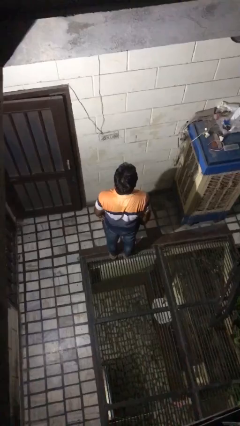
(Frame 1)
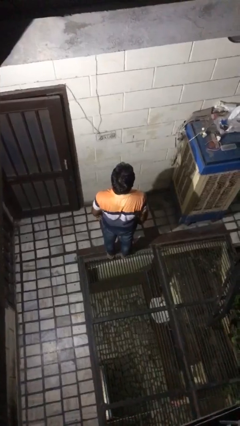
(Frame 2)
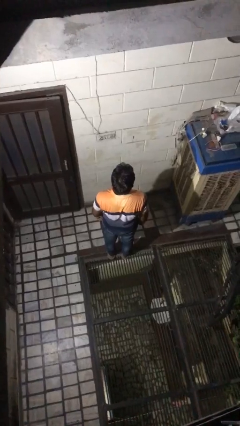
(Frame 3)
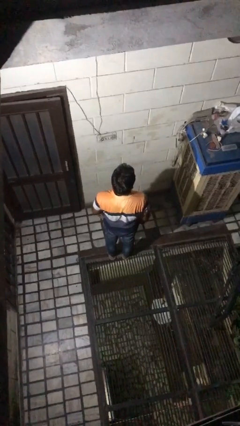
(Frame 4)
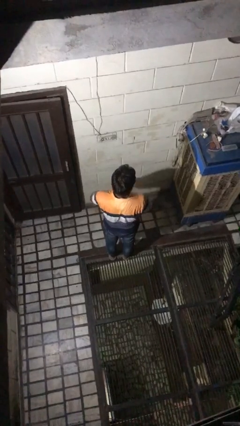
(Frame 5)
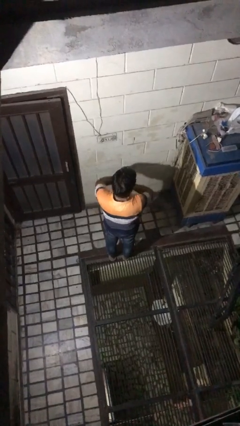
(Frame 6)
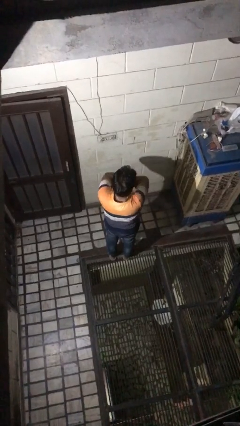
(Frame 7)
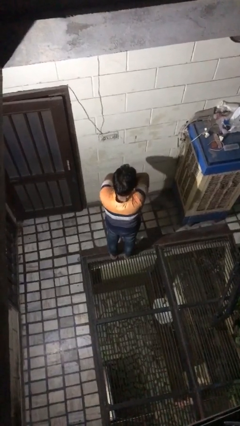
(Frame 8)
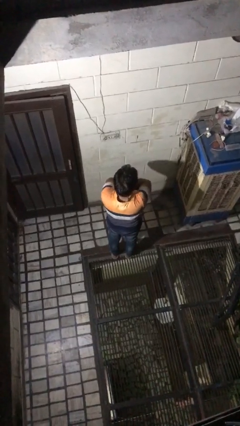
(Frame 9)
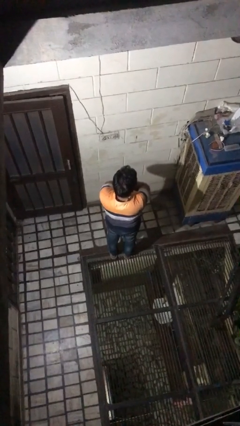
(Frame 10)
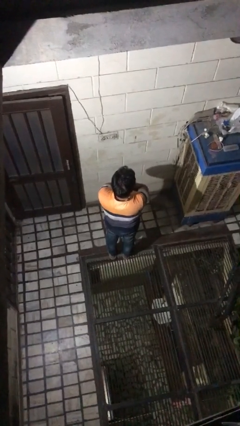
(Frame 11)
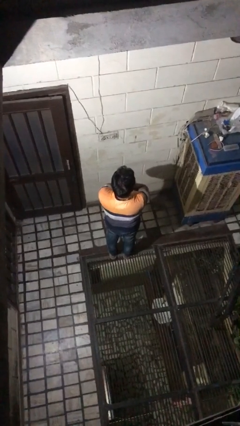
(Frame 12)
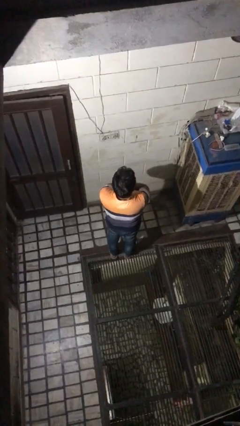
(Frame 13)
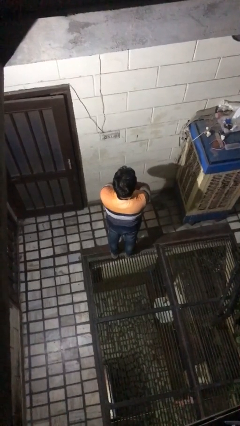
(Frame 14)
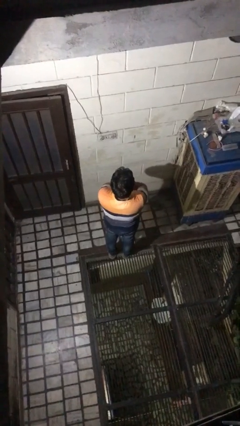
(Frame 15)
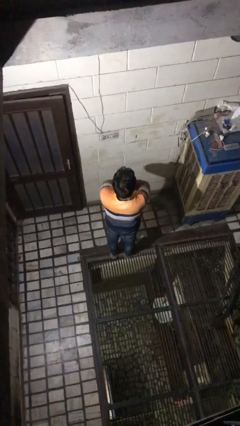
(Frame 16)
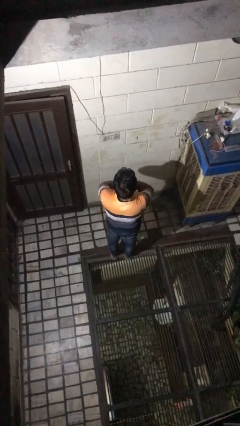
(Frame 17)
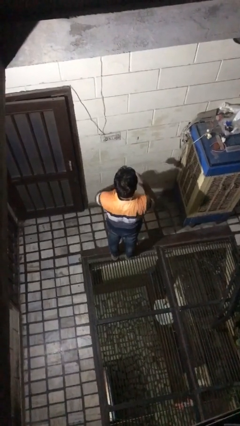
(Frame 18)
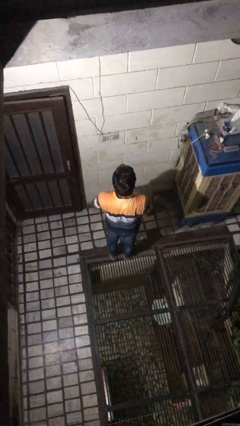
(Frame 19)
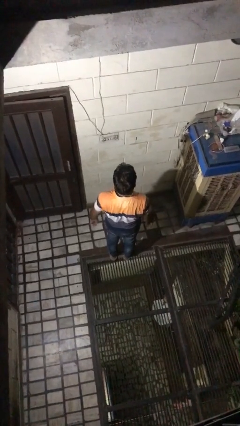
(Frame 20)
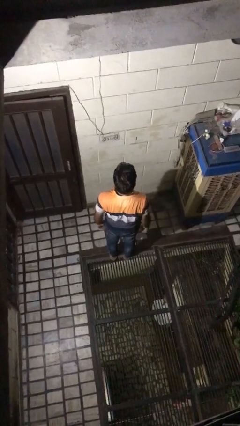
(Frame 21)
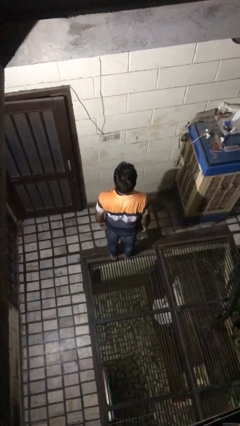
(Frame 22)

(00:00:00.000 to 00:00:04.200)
person crosses arms

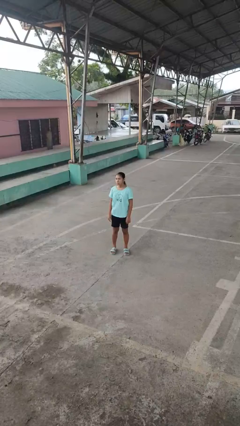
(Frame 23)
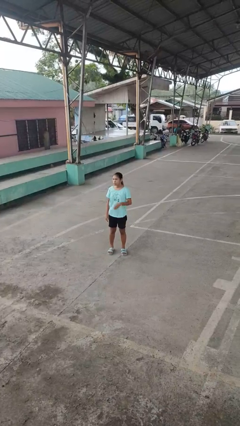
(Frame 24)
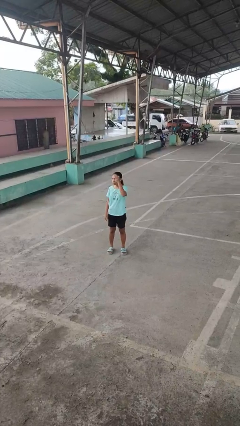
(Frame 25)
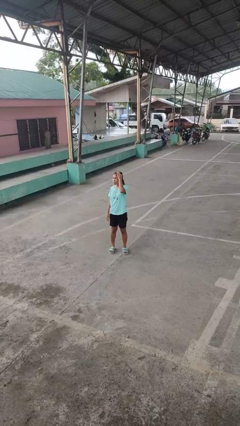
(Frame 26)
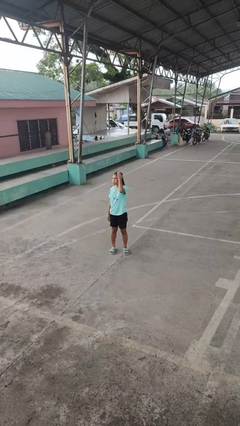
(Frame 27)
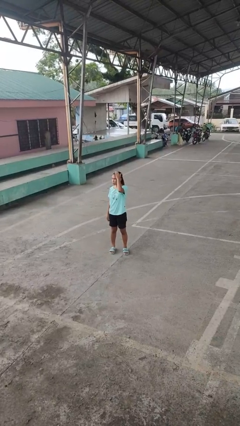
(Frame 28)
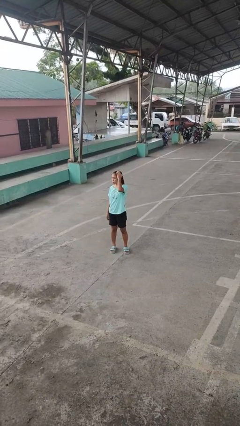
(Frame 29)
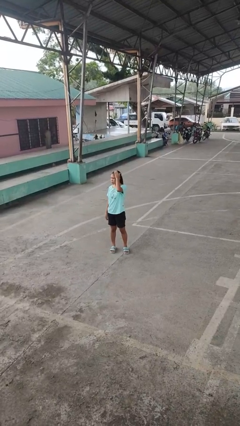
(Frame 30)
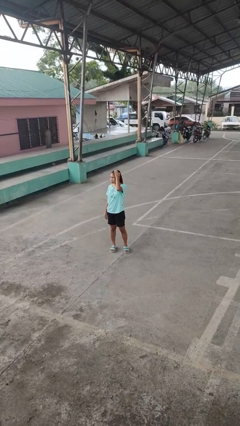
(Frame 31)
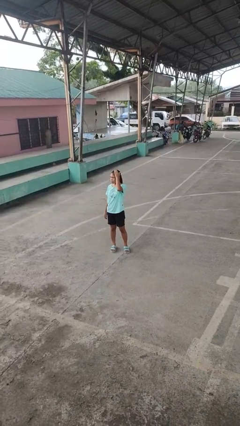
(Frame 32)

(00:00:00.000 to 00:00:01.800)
person pats head

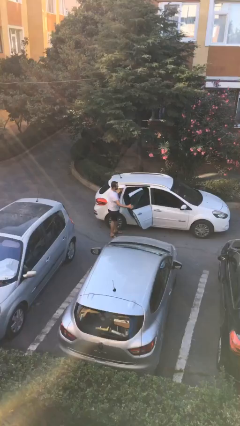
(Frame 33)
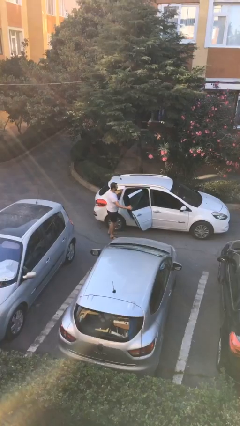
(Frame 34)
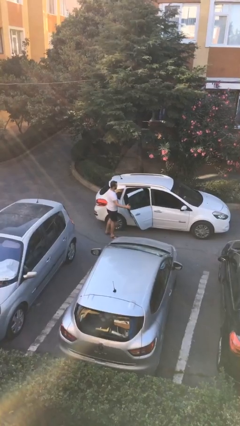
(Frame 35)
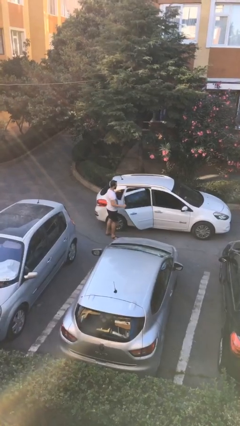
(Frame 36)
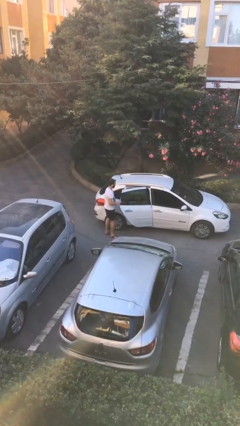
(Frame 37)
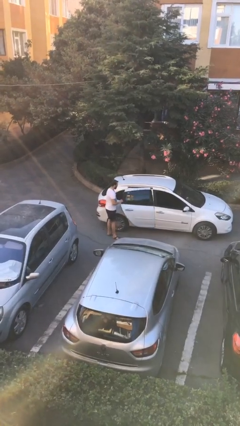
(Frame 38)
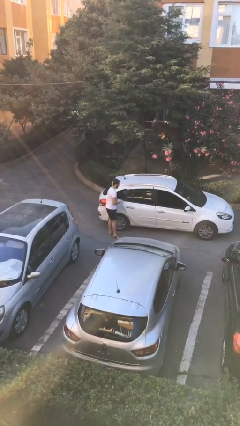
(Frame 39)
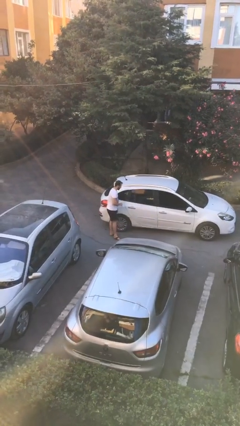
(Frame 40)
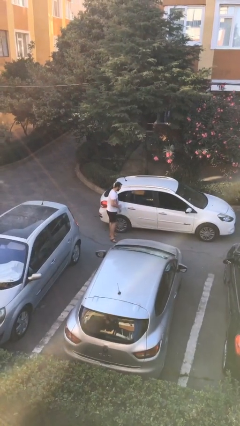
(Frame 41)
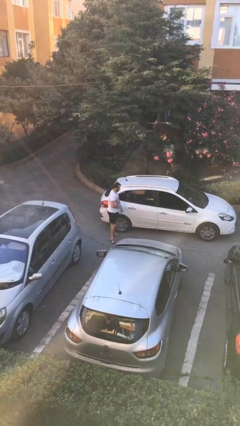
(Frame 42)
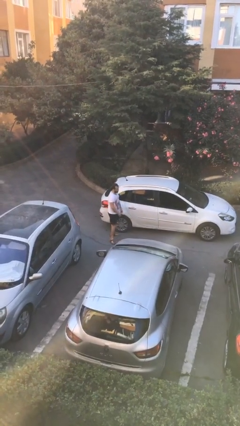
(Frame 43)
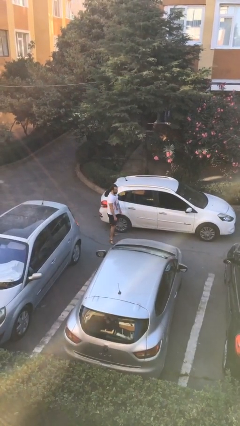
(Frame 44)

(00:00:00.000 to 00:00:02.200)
person closes car door

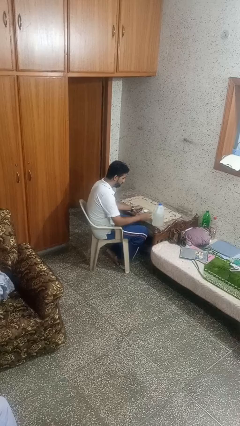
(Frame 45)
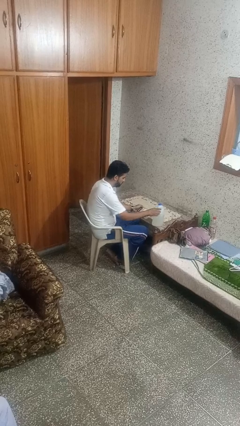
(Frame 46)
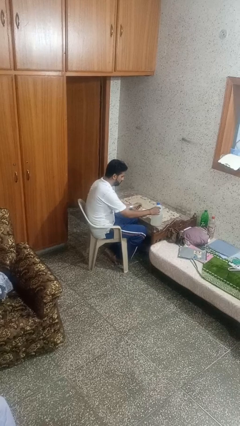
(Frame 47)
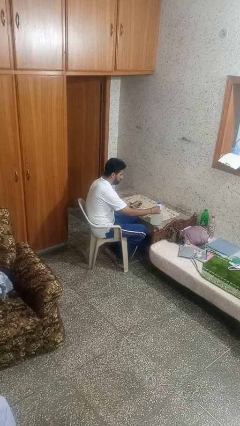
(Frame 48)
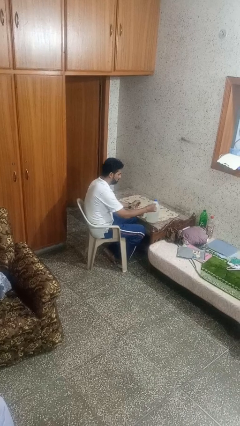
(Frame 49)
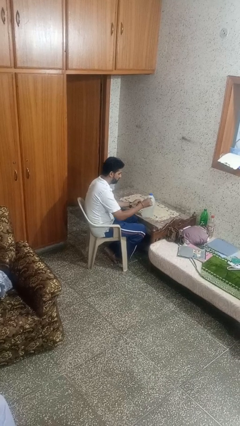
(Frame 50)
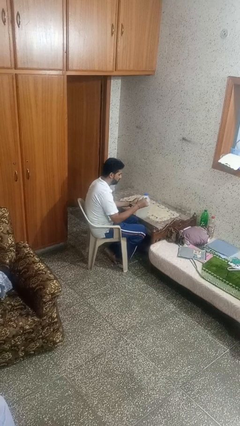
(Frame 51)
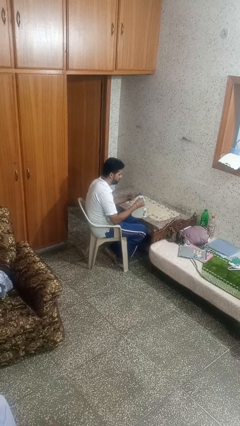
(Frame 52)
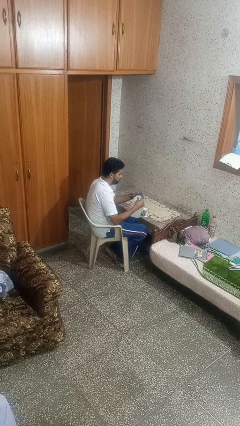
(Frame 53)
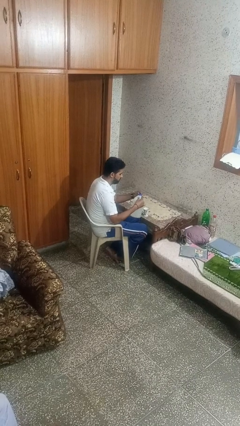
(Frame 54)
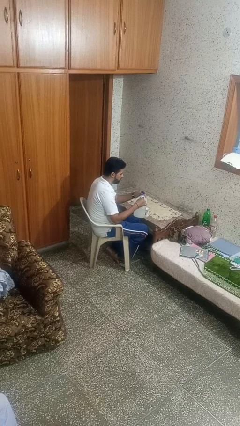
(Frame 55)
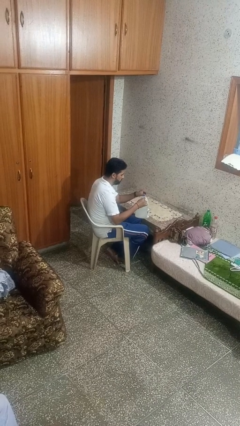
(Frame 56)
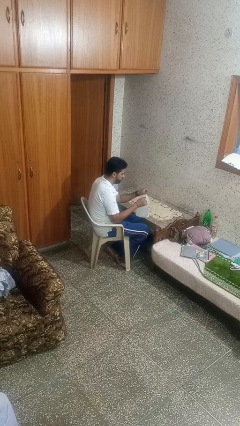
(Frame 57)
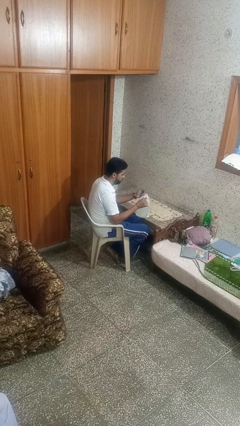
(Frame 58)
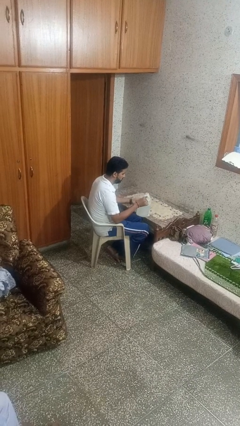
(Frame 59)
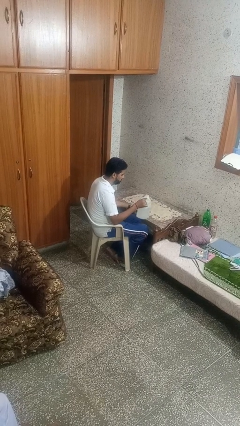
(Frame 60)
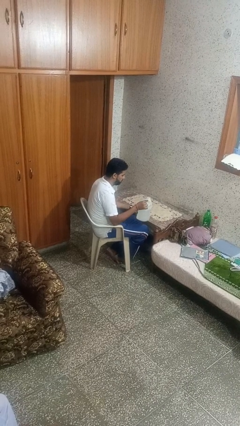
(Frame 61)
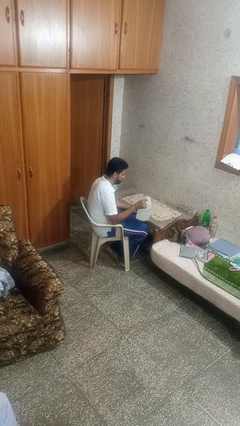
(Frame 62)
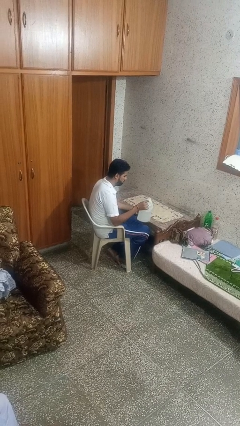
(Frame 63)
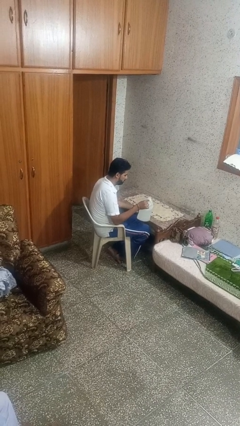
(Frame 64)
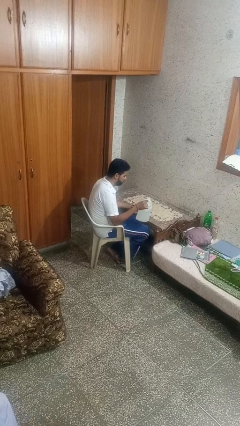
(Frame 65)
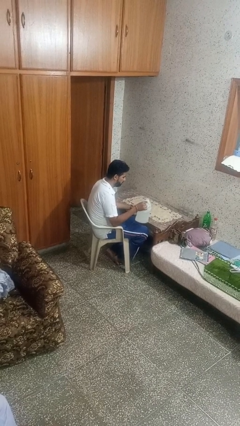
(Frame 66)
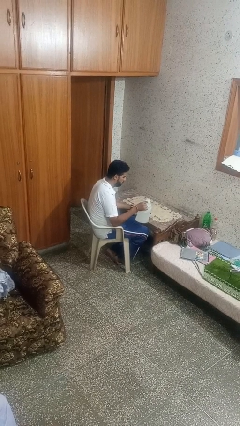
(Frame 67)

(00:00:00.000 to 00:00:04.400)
person unscrews lid from bottle

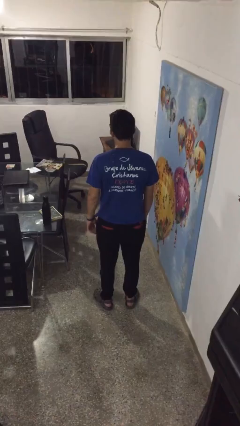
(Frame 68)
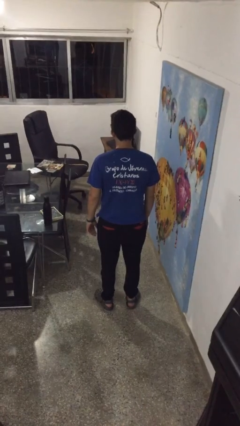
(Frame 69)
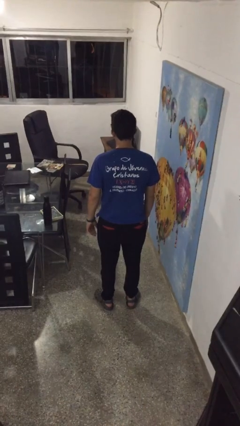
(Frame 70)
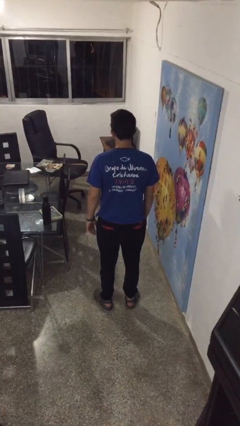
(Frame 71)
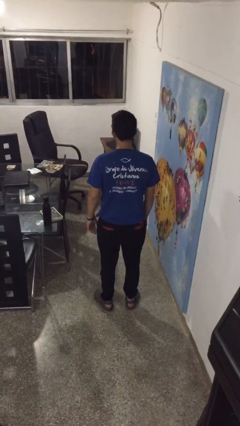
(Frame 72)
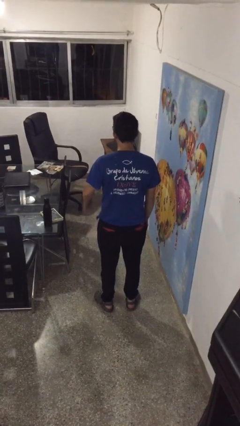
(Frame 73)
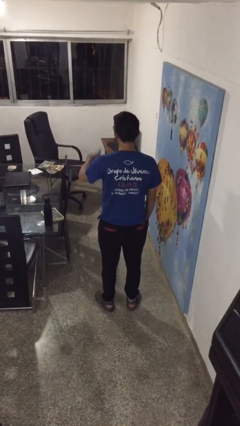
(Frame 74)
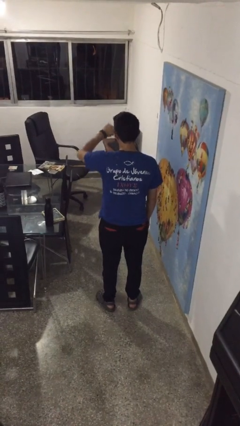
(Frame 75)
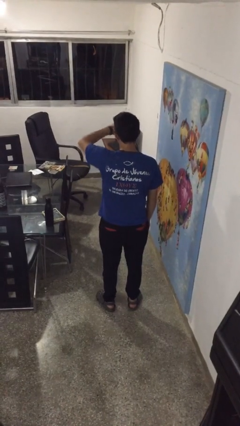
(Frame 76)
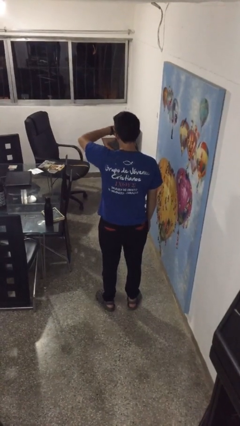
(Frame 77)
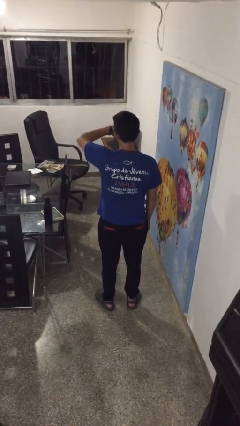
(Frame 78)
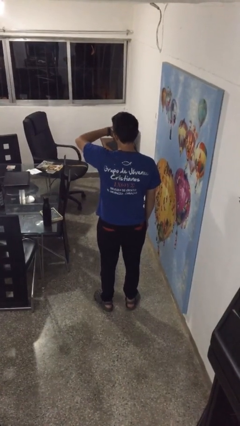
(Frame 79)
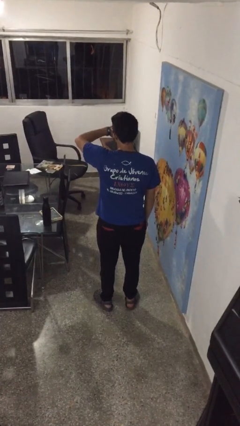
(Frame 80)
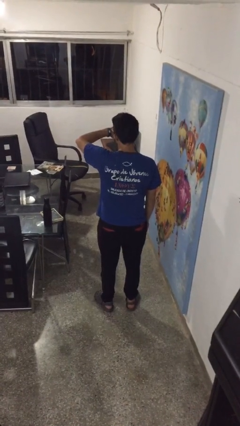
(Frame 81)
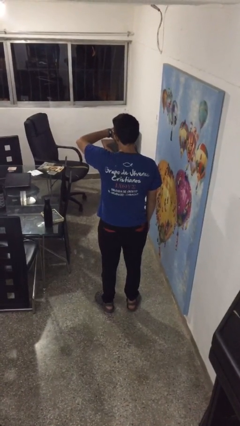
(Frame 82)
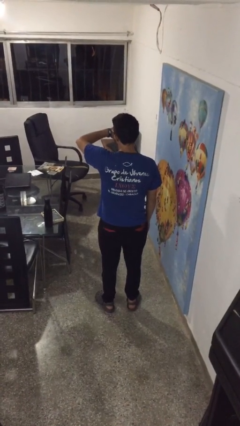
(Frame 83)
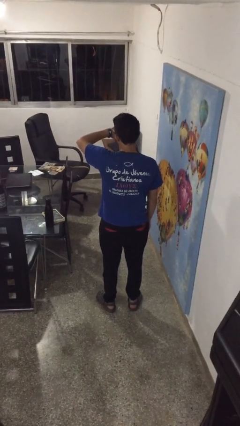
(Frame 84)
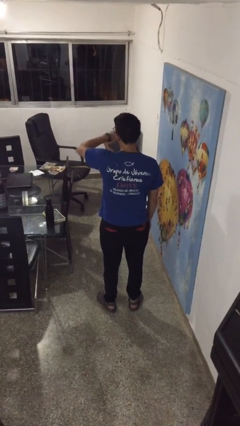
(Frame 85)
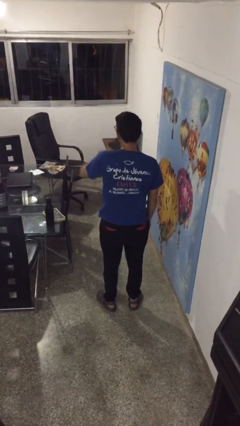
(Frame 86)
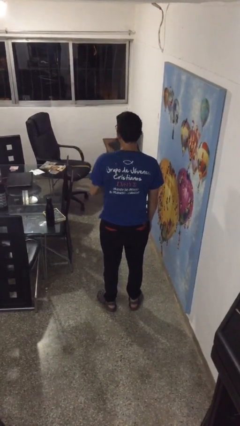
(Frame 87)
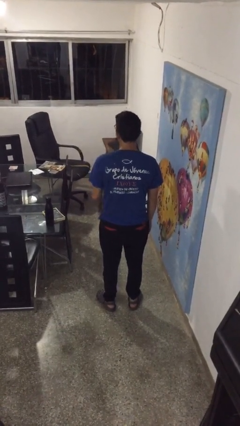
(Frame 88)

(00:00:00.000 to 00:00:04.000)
person looks at wristwatch

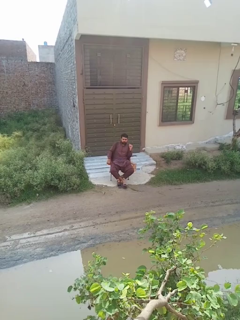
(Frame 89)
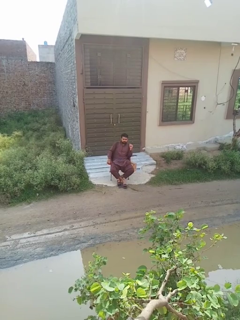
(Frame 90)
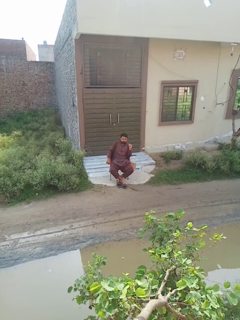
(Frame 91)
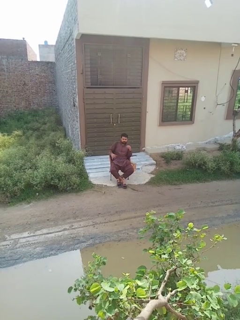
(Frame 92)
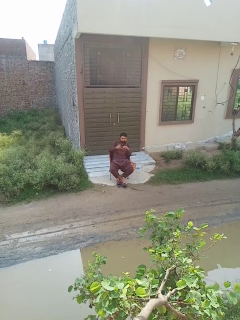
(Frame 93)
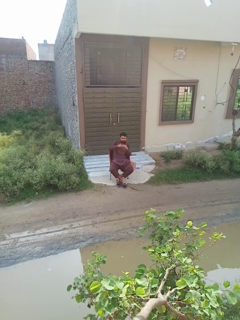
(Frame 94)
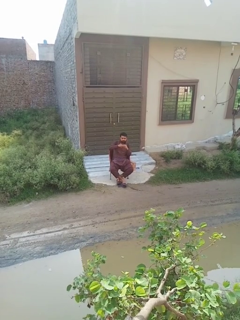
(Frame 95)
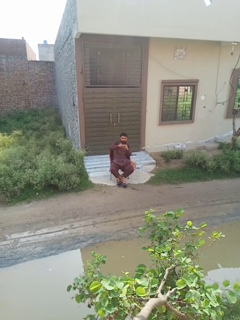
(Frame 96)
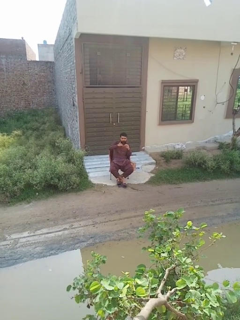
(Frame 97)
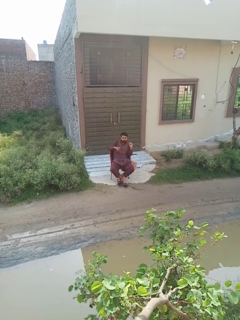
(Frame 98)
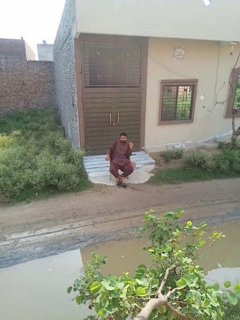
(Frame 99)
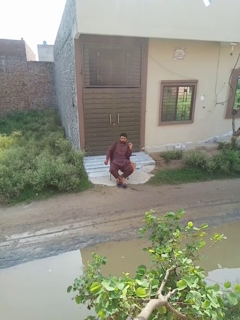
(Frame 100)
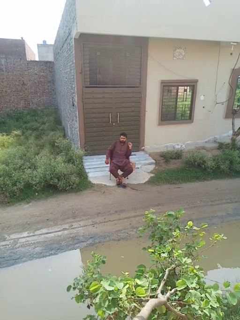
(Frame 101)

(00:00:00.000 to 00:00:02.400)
person takes off ring
